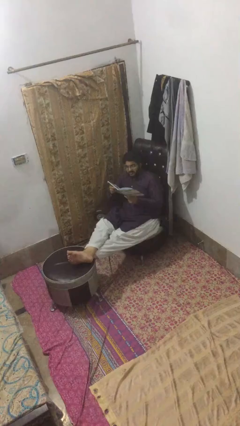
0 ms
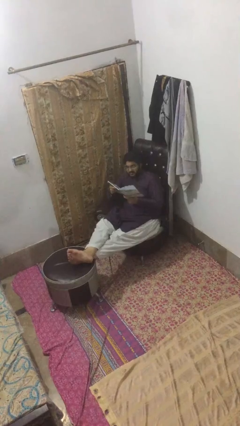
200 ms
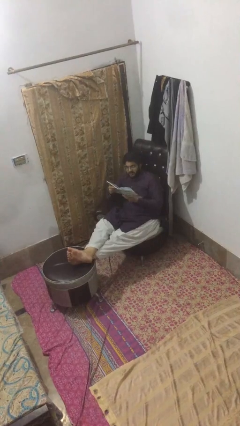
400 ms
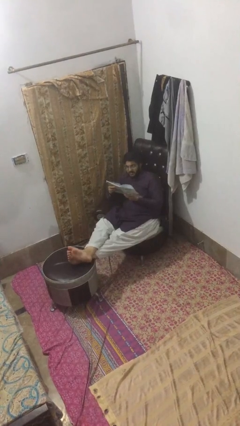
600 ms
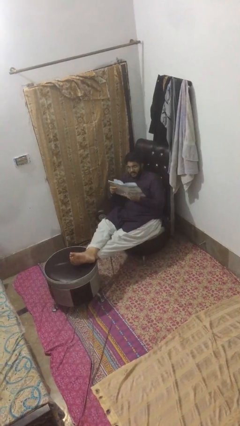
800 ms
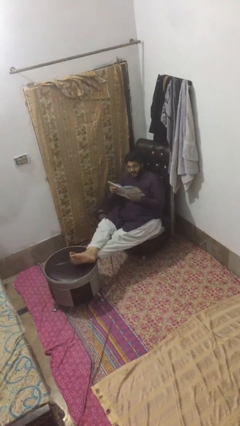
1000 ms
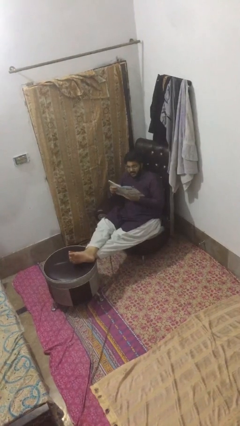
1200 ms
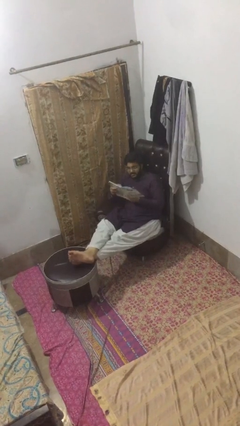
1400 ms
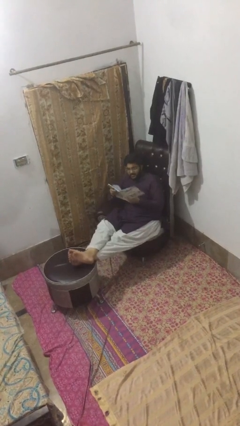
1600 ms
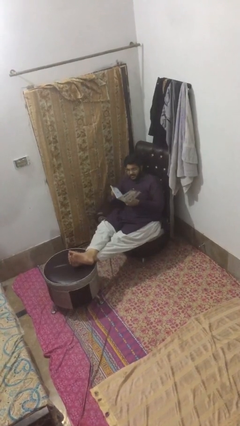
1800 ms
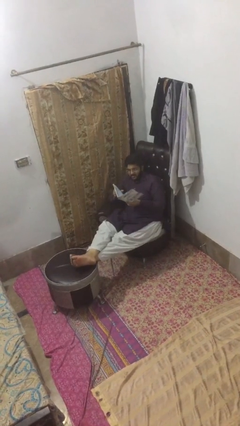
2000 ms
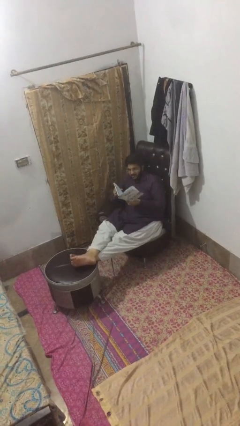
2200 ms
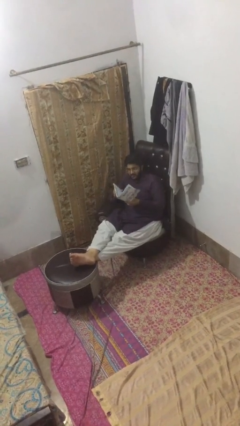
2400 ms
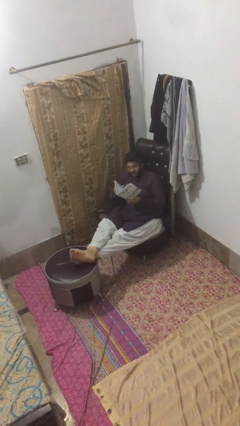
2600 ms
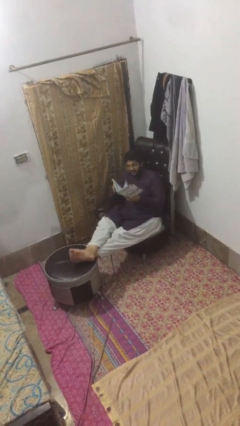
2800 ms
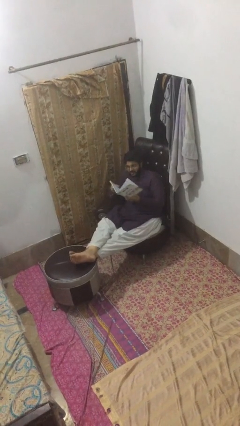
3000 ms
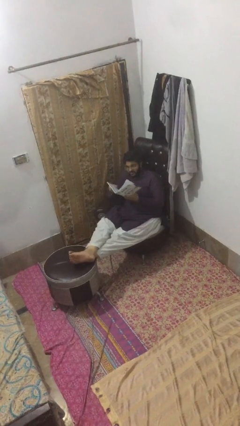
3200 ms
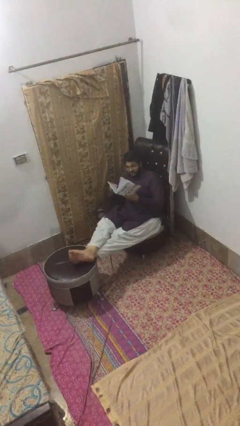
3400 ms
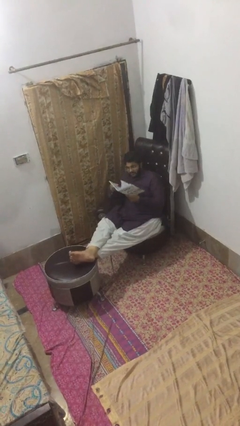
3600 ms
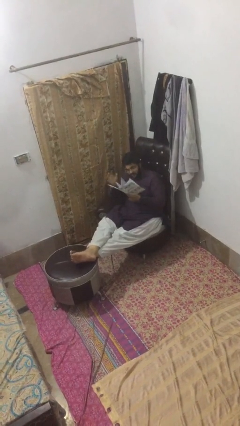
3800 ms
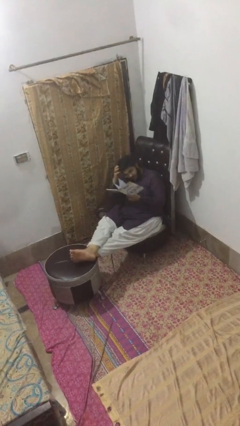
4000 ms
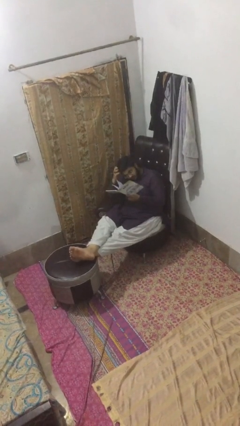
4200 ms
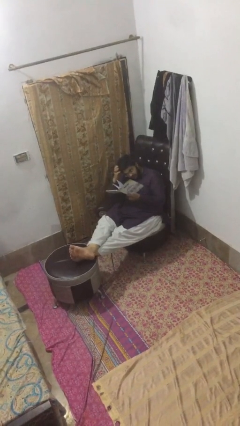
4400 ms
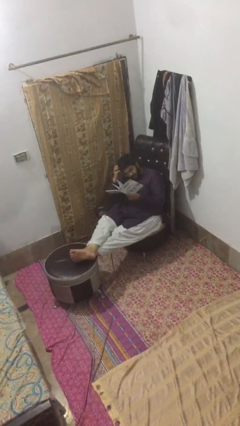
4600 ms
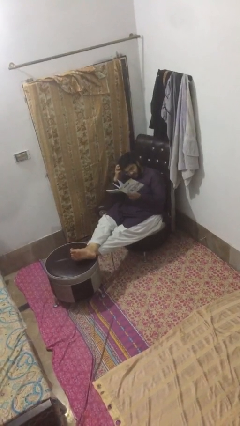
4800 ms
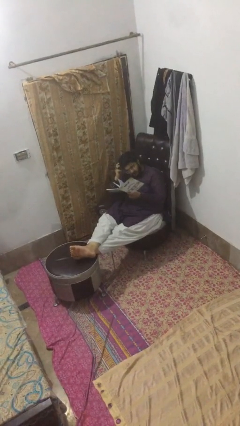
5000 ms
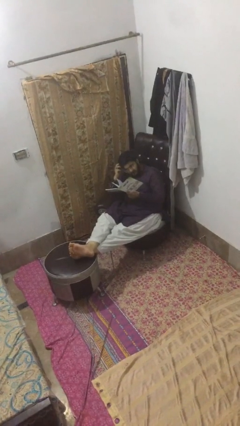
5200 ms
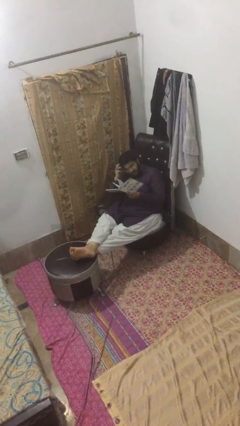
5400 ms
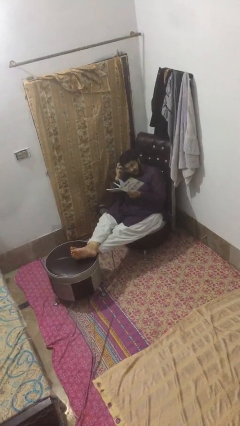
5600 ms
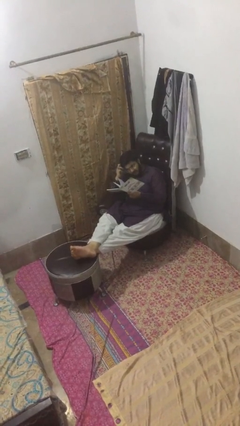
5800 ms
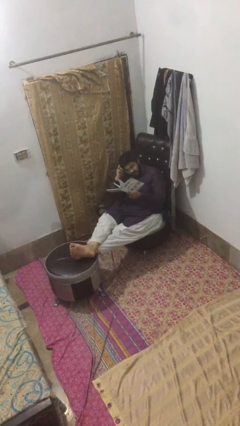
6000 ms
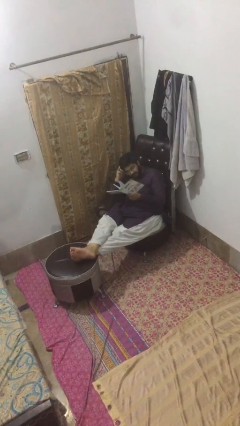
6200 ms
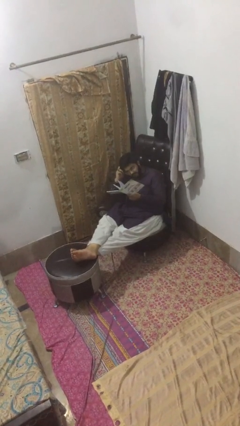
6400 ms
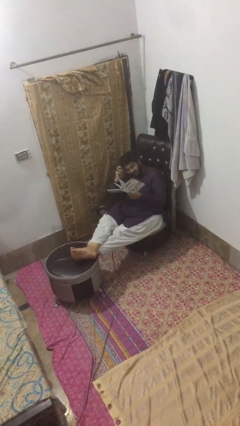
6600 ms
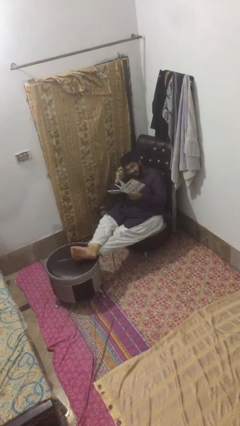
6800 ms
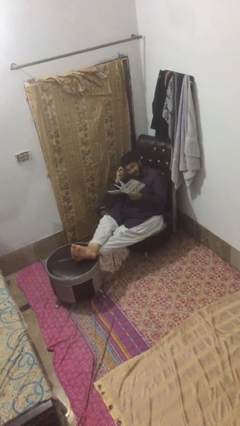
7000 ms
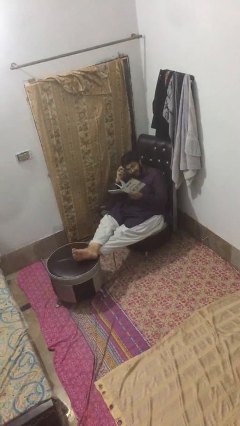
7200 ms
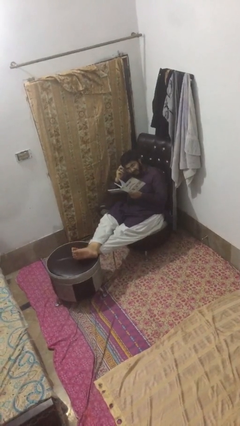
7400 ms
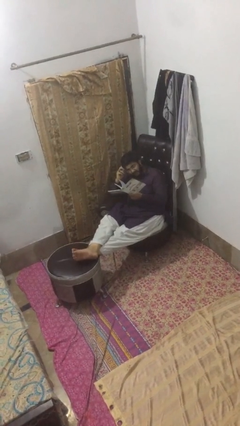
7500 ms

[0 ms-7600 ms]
person reads document

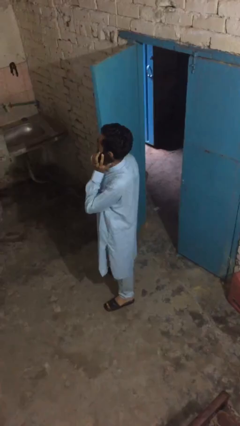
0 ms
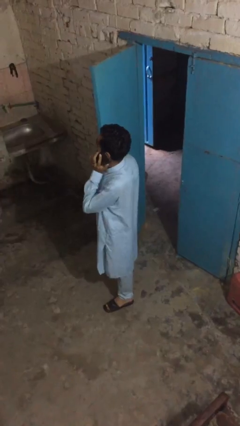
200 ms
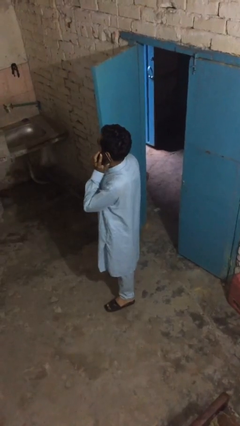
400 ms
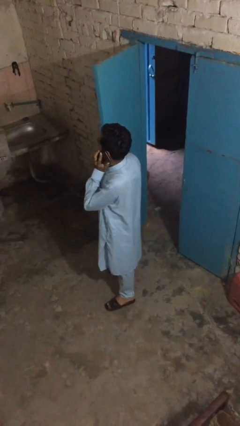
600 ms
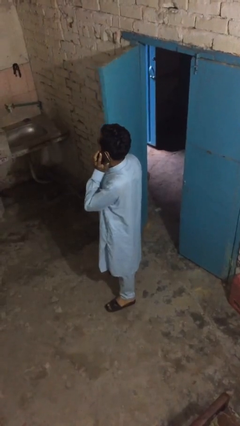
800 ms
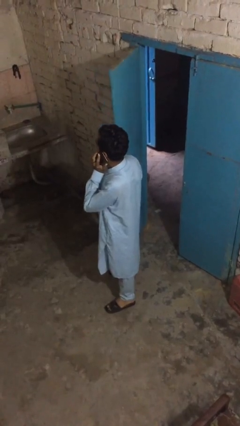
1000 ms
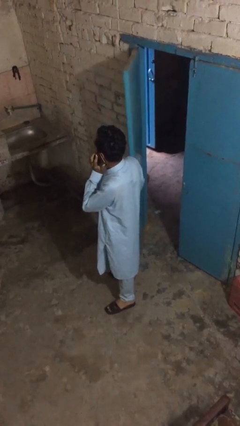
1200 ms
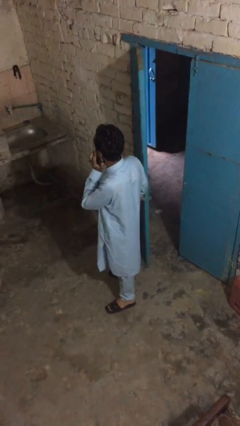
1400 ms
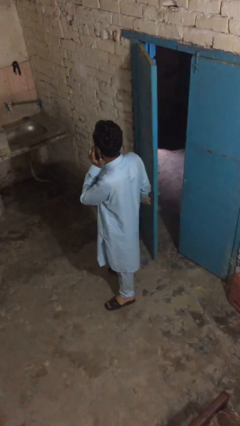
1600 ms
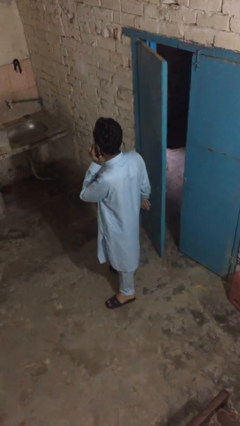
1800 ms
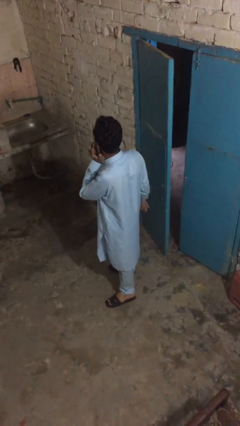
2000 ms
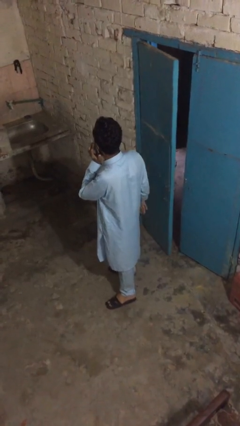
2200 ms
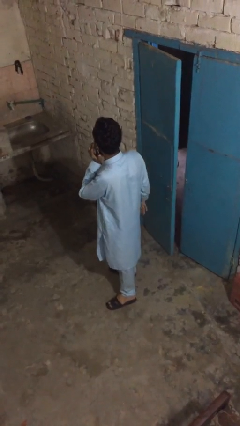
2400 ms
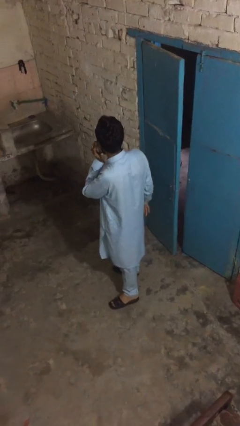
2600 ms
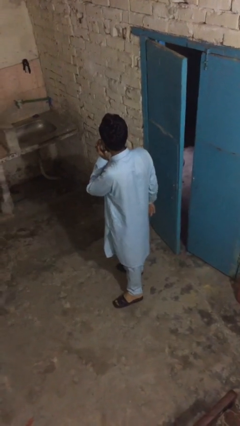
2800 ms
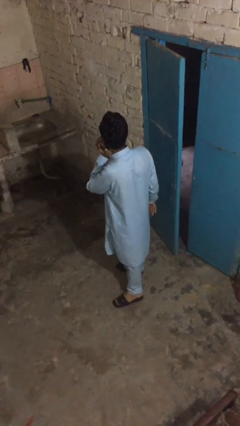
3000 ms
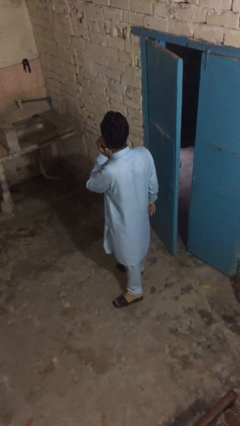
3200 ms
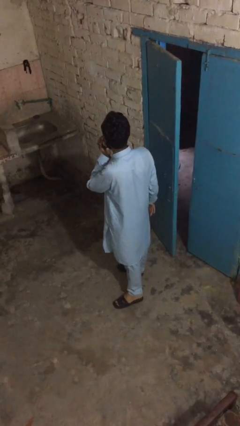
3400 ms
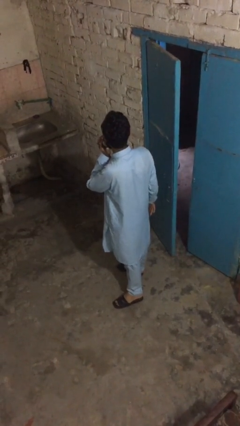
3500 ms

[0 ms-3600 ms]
person closes facility door

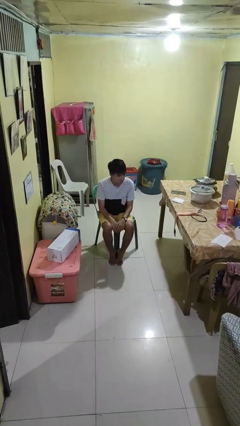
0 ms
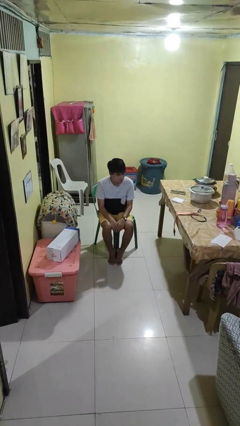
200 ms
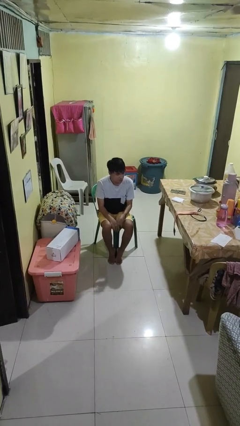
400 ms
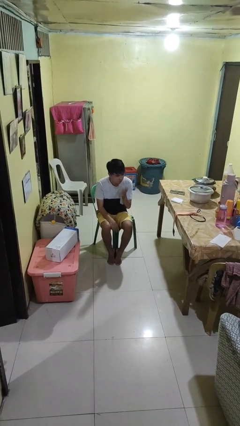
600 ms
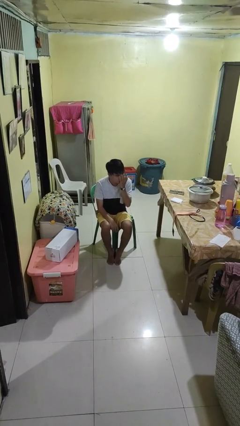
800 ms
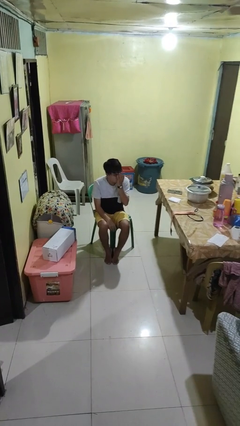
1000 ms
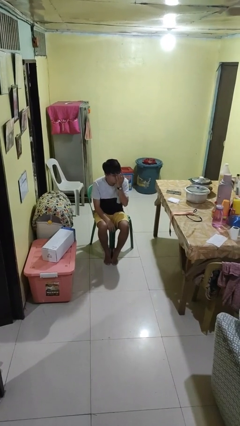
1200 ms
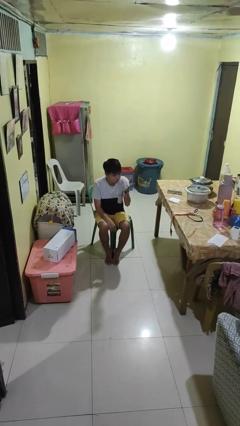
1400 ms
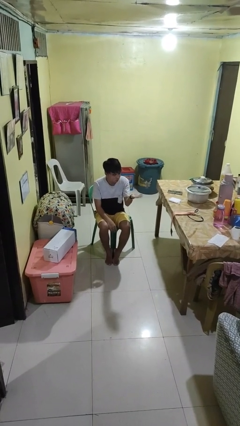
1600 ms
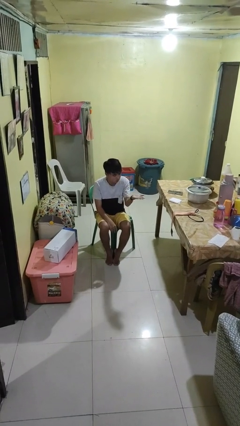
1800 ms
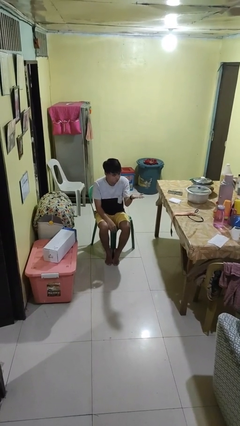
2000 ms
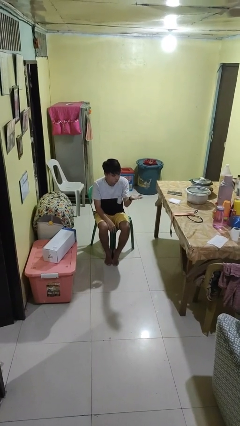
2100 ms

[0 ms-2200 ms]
person gestures blow kiss

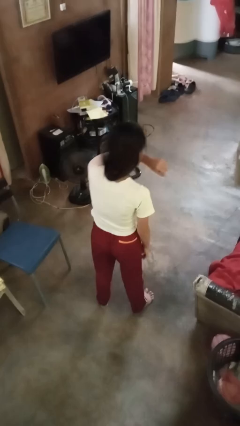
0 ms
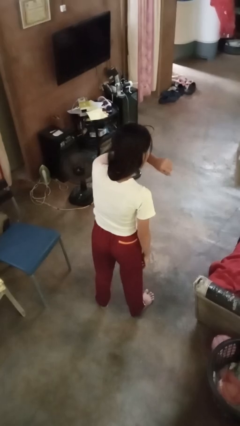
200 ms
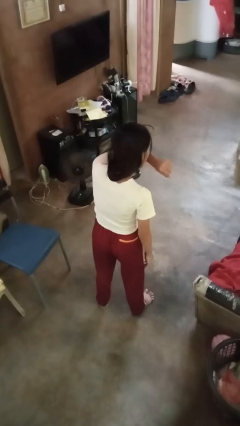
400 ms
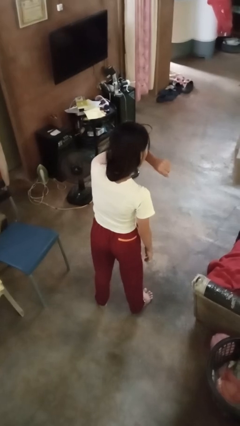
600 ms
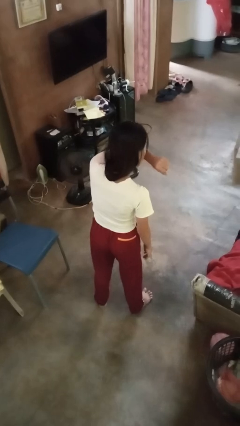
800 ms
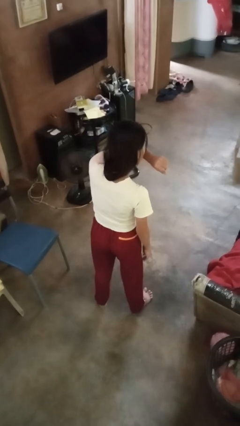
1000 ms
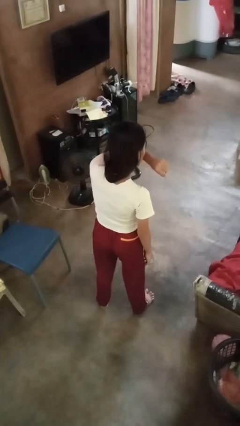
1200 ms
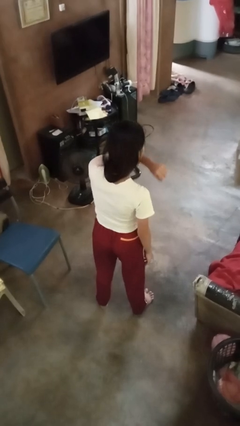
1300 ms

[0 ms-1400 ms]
person sneezes into arm

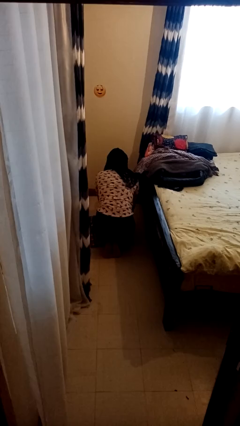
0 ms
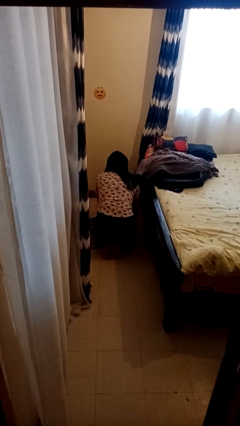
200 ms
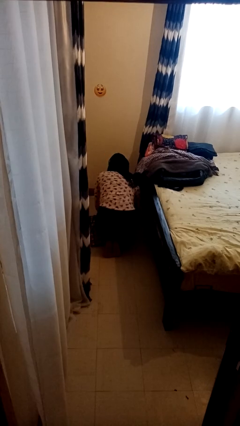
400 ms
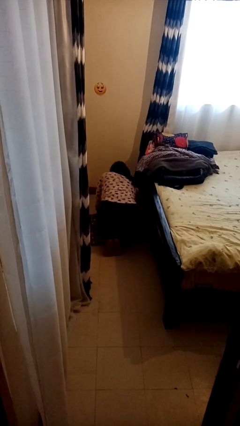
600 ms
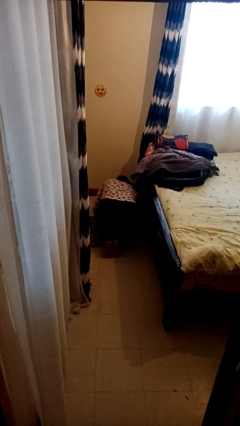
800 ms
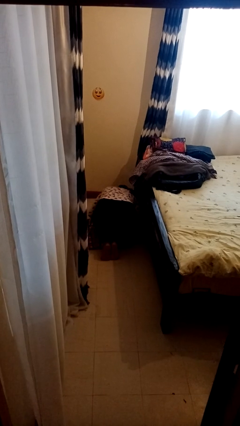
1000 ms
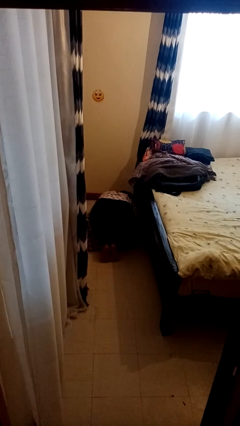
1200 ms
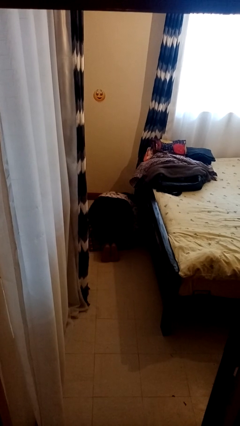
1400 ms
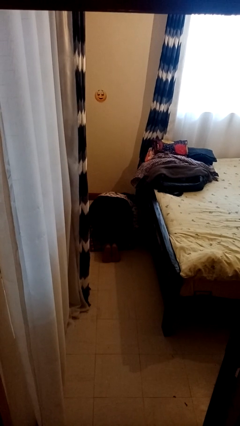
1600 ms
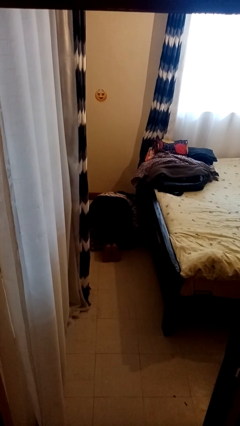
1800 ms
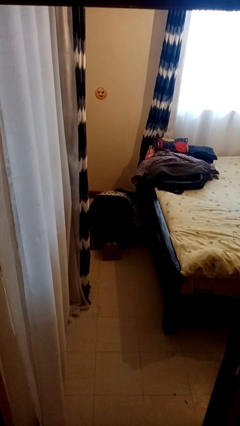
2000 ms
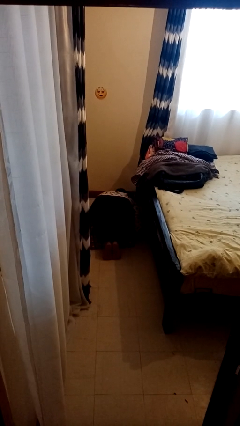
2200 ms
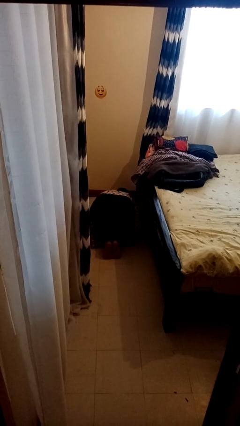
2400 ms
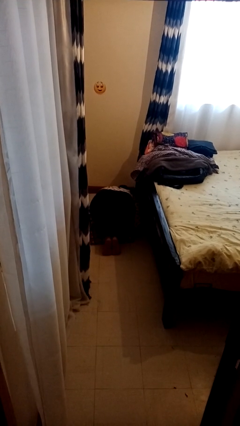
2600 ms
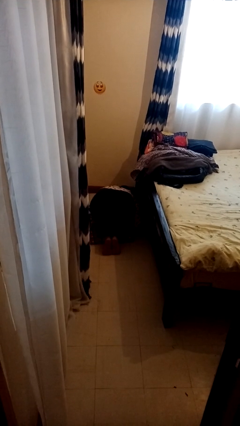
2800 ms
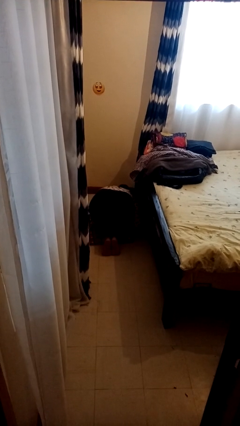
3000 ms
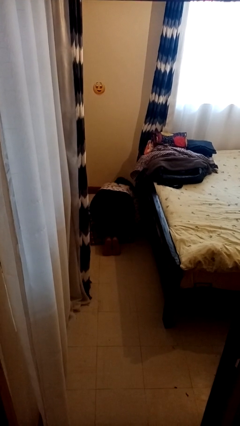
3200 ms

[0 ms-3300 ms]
person searches under bed

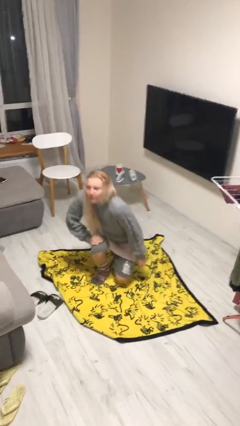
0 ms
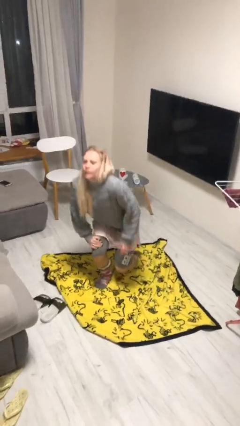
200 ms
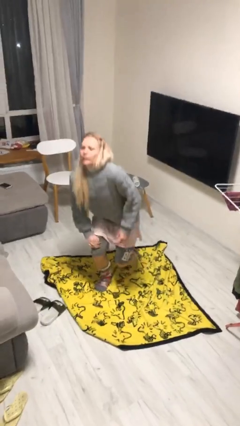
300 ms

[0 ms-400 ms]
person stands up
